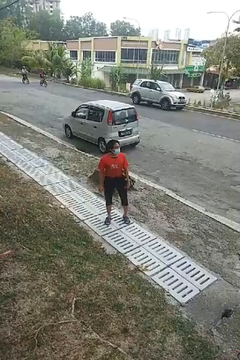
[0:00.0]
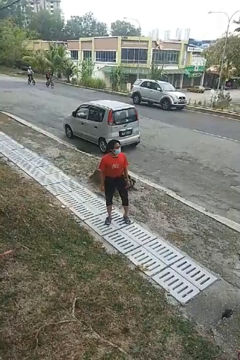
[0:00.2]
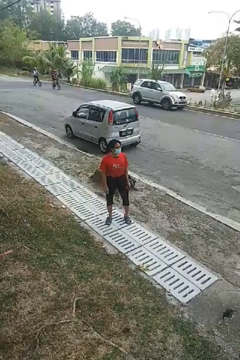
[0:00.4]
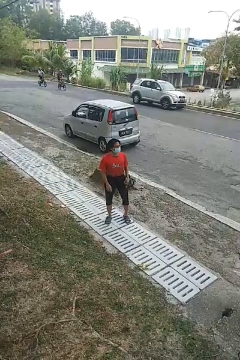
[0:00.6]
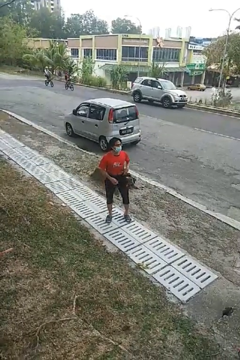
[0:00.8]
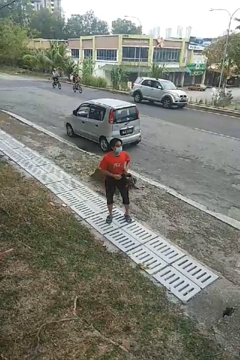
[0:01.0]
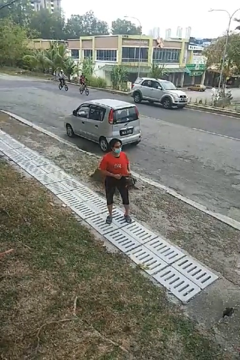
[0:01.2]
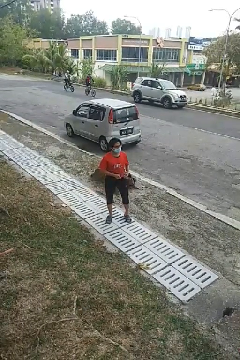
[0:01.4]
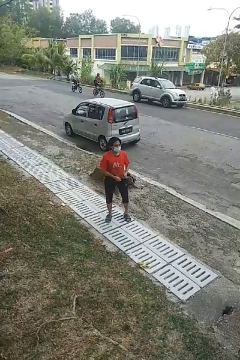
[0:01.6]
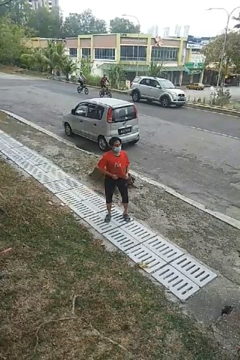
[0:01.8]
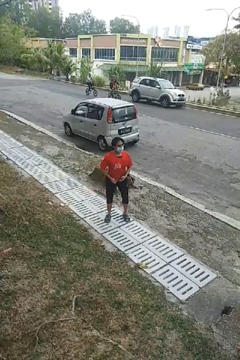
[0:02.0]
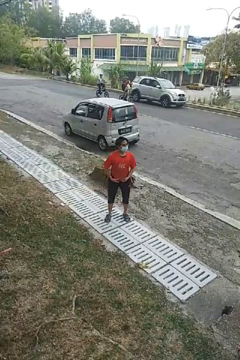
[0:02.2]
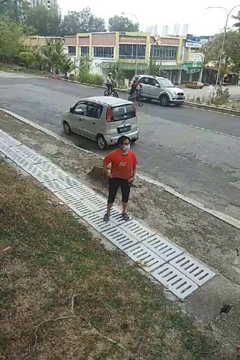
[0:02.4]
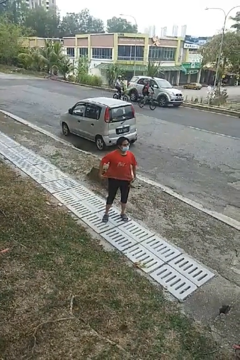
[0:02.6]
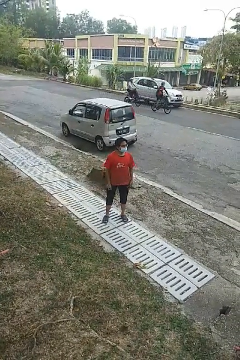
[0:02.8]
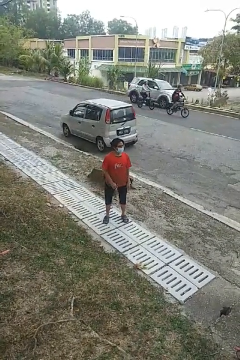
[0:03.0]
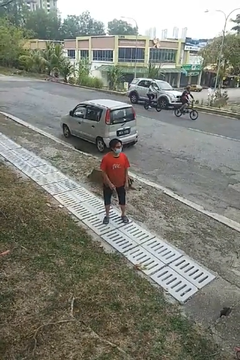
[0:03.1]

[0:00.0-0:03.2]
person untucks shirt

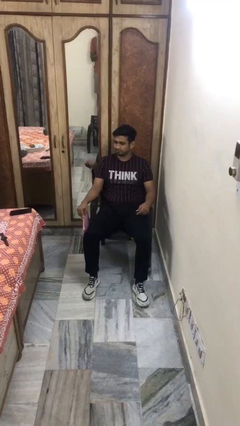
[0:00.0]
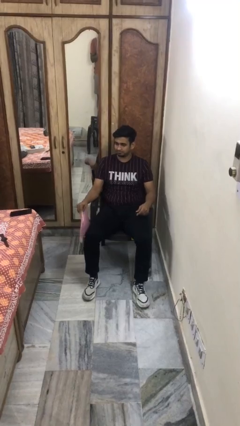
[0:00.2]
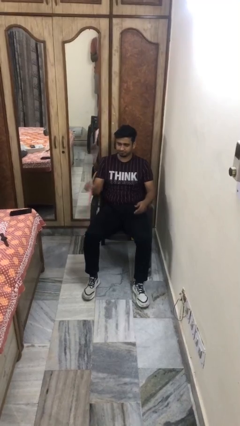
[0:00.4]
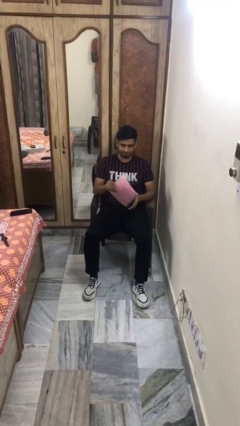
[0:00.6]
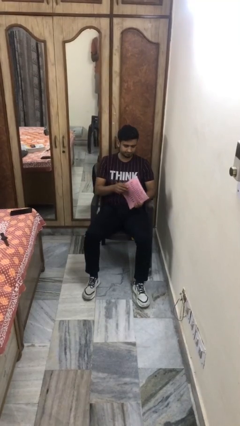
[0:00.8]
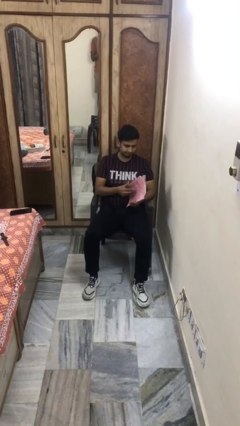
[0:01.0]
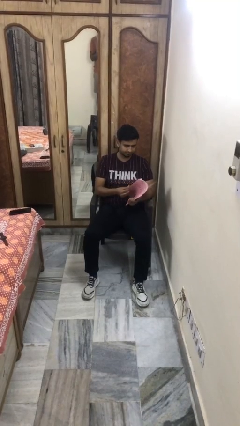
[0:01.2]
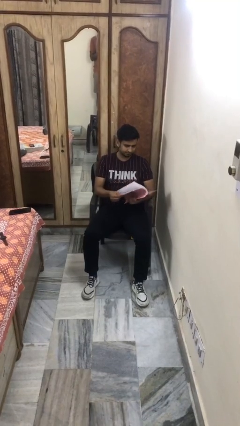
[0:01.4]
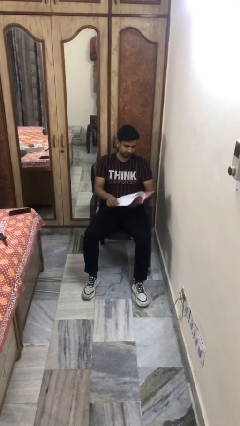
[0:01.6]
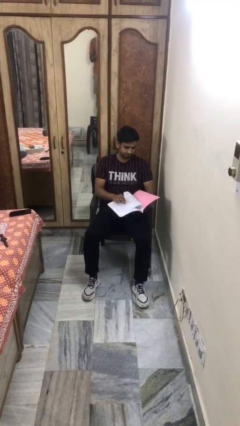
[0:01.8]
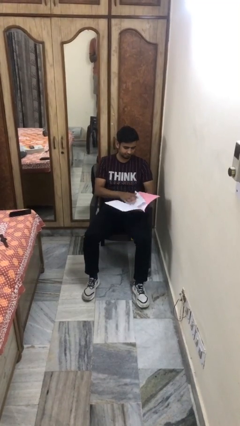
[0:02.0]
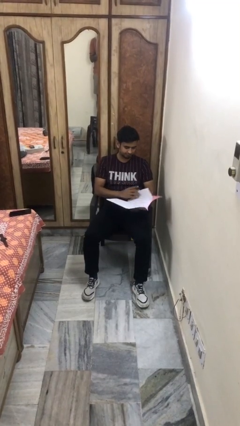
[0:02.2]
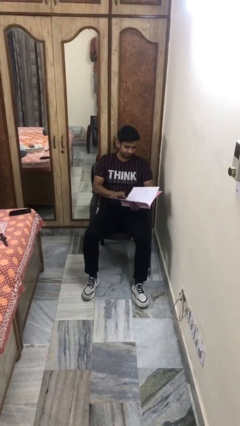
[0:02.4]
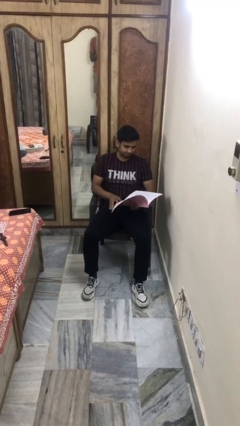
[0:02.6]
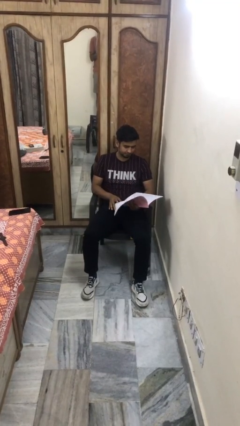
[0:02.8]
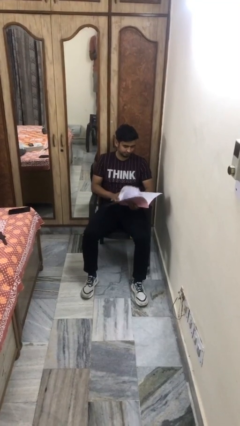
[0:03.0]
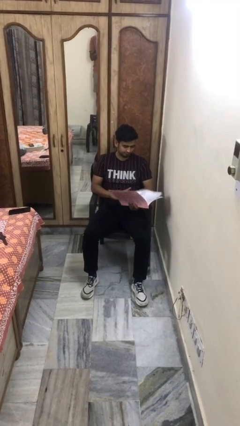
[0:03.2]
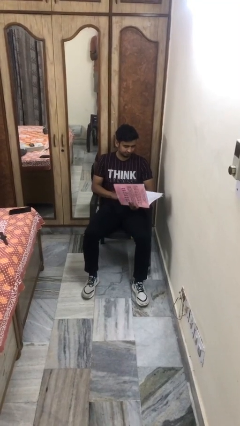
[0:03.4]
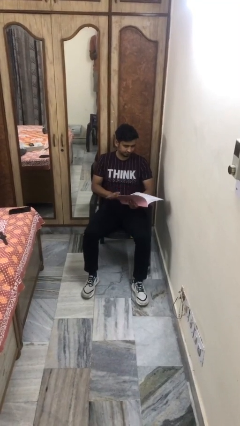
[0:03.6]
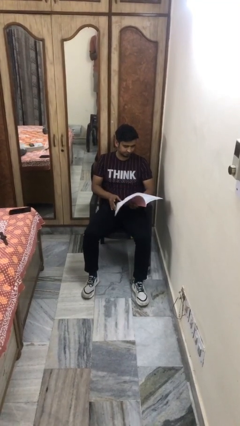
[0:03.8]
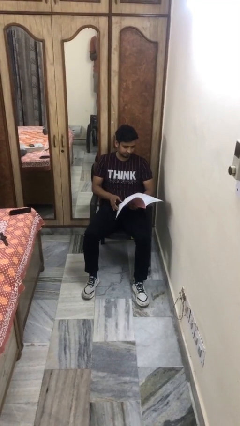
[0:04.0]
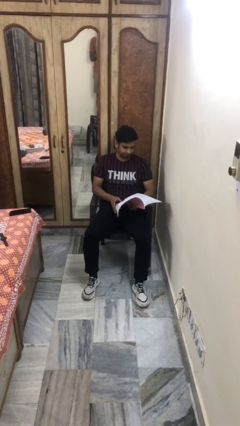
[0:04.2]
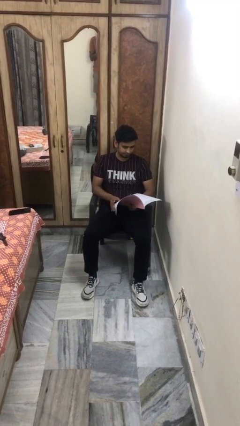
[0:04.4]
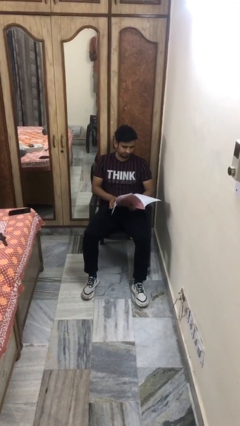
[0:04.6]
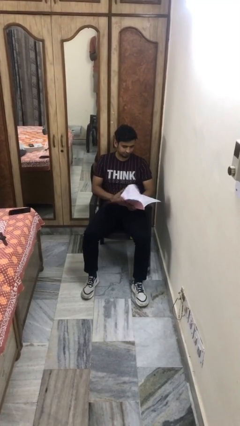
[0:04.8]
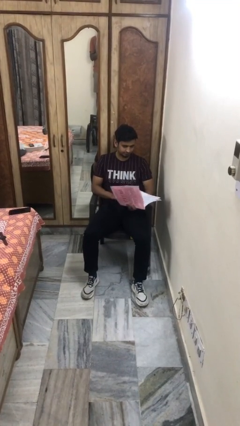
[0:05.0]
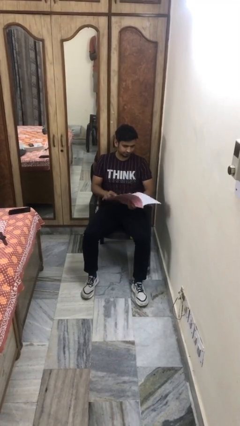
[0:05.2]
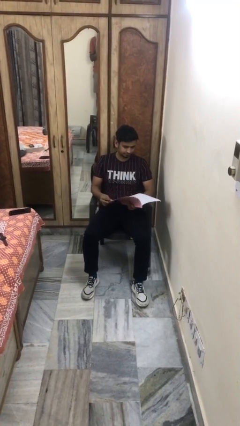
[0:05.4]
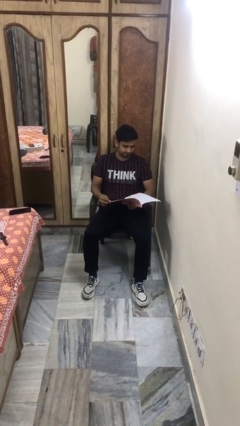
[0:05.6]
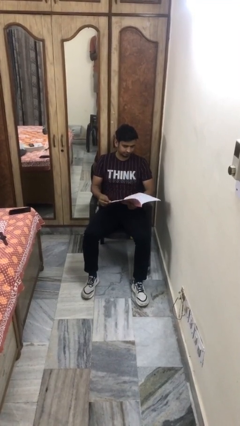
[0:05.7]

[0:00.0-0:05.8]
person reads magazine

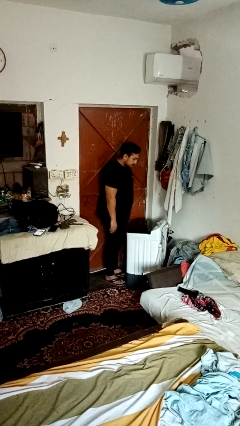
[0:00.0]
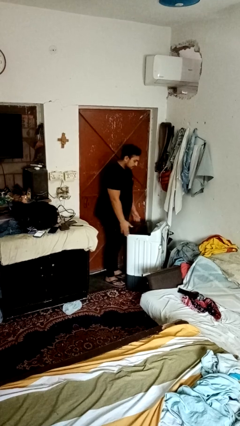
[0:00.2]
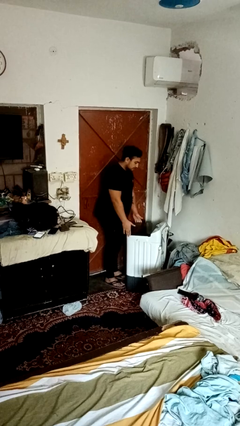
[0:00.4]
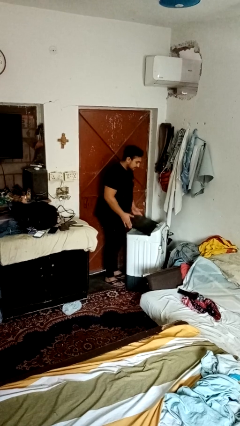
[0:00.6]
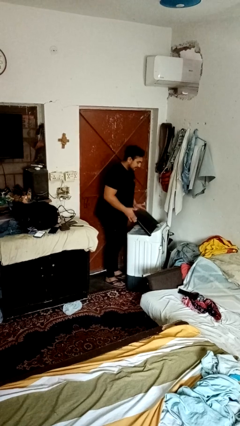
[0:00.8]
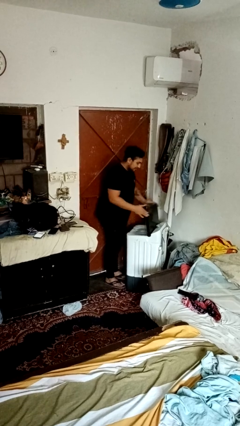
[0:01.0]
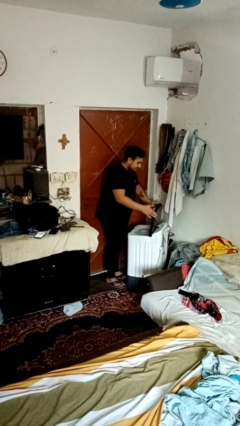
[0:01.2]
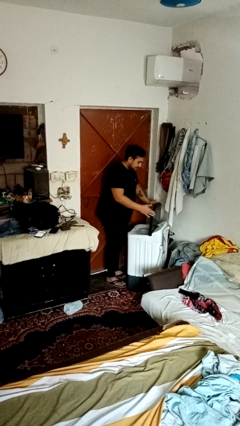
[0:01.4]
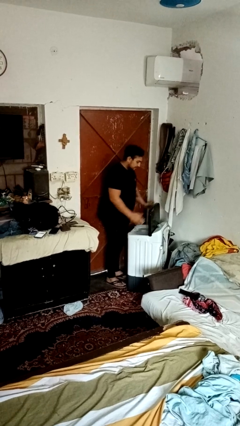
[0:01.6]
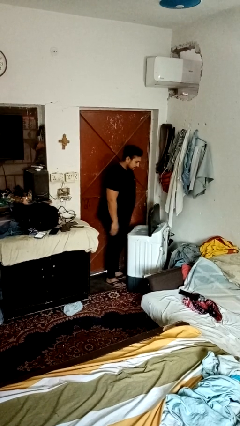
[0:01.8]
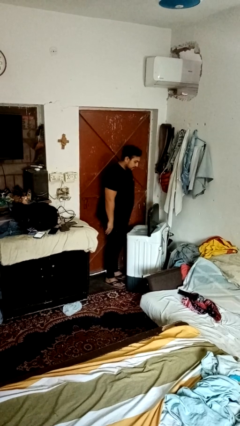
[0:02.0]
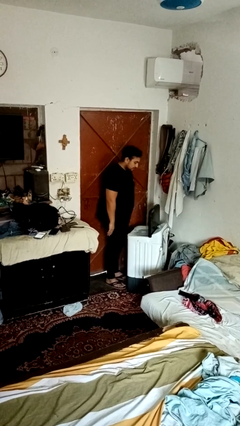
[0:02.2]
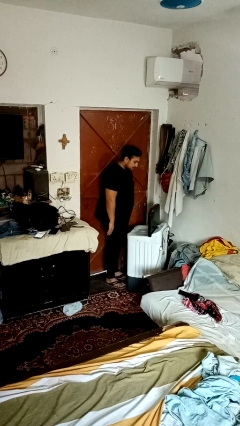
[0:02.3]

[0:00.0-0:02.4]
person opens clothes washer

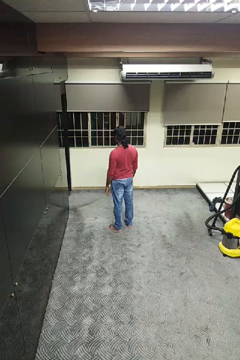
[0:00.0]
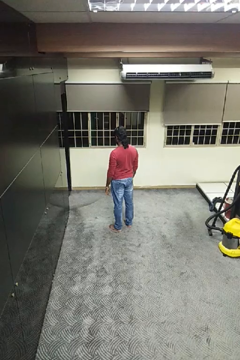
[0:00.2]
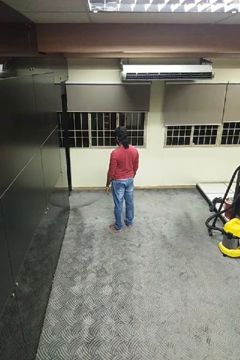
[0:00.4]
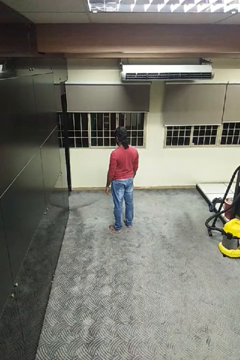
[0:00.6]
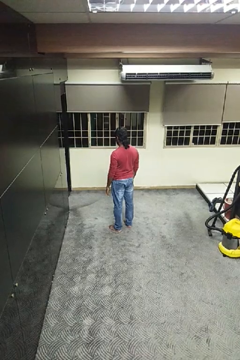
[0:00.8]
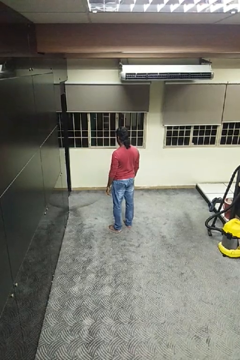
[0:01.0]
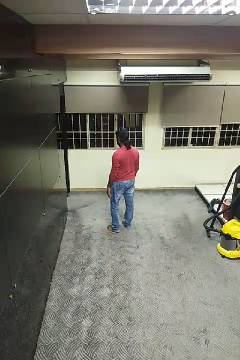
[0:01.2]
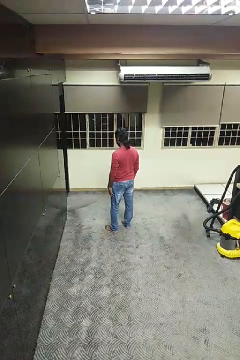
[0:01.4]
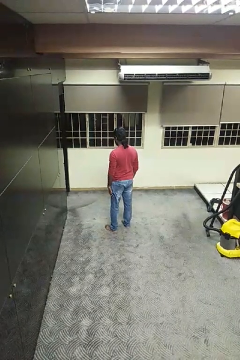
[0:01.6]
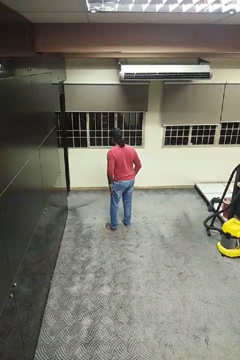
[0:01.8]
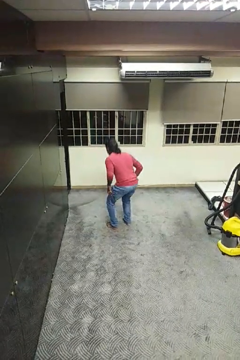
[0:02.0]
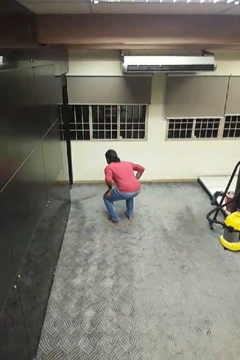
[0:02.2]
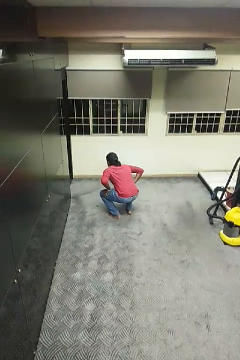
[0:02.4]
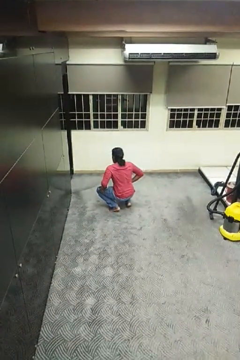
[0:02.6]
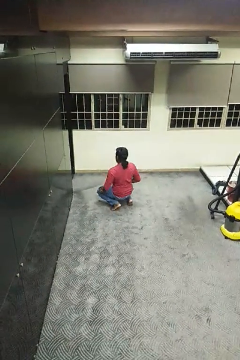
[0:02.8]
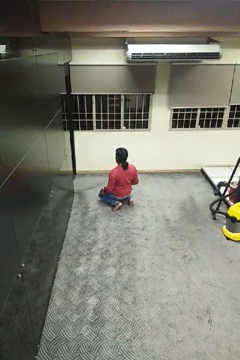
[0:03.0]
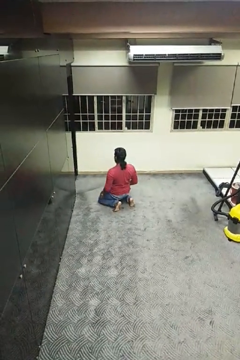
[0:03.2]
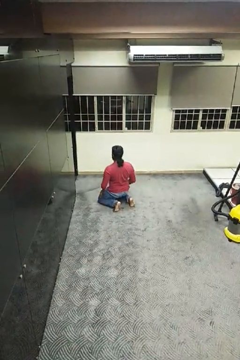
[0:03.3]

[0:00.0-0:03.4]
person kneels

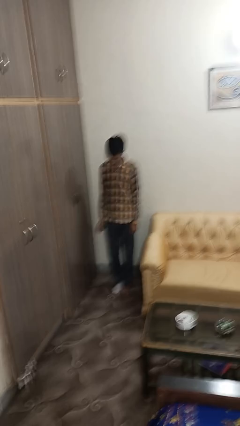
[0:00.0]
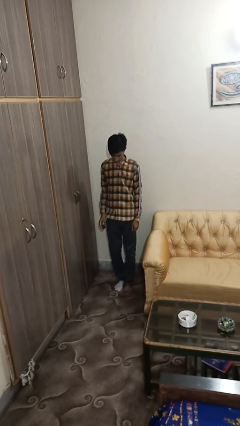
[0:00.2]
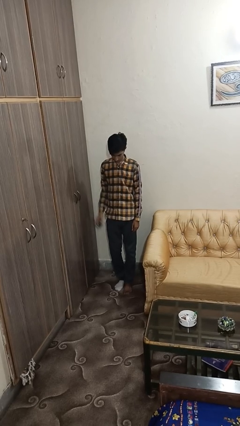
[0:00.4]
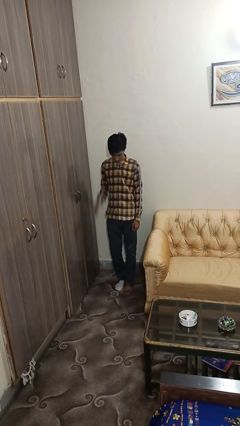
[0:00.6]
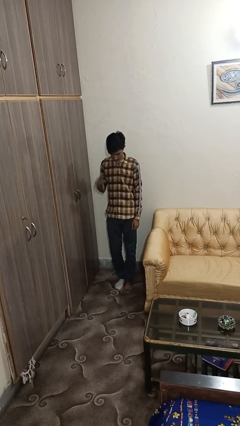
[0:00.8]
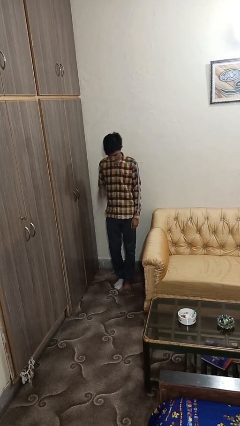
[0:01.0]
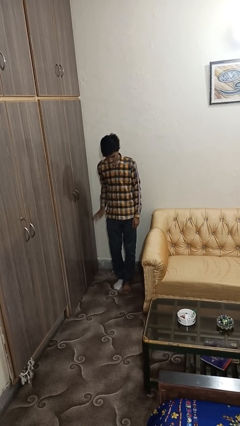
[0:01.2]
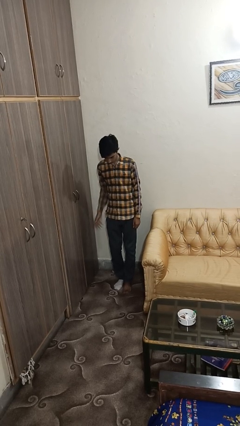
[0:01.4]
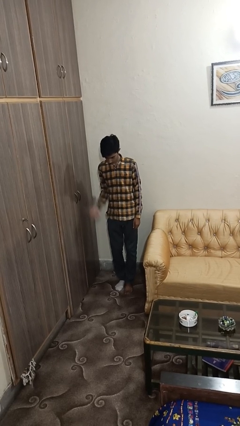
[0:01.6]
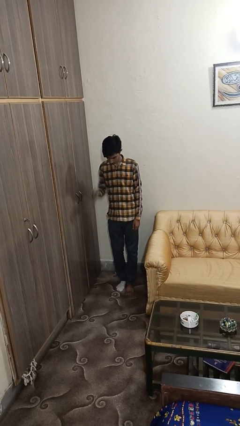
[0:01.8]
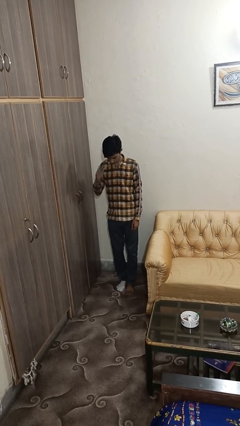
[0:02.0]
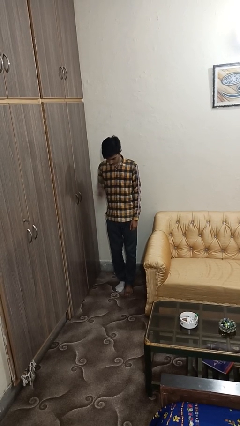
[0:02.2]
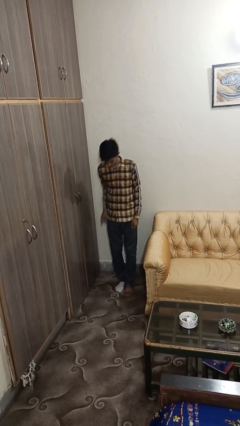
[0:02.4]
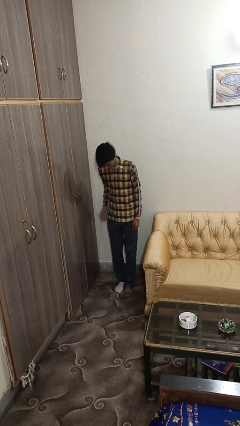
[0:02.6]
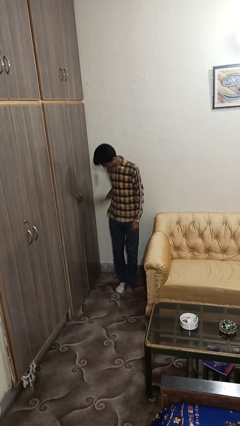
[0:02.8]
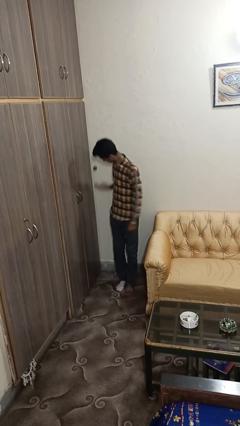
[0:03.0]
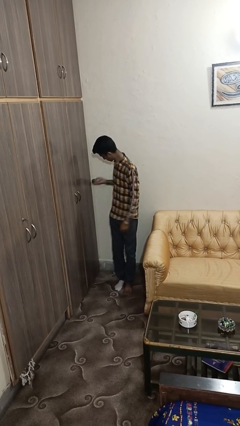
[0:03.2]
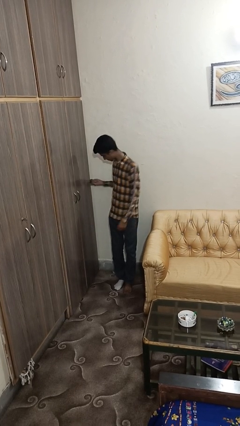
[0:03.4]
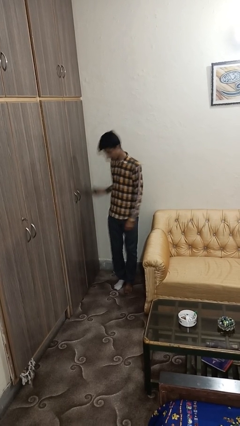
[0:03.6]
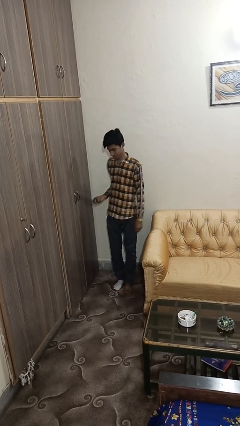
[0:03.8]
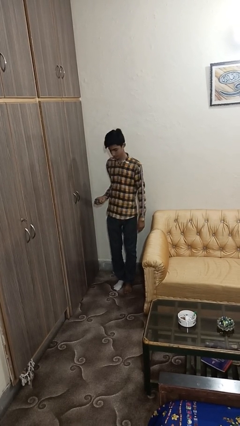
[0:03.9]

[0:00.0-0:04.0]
person bounces ball on floor

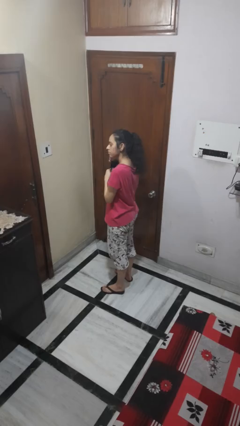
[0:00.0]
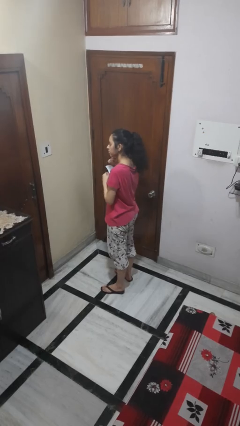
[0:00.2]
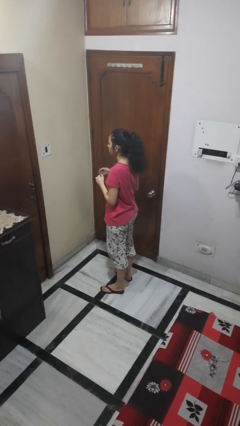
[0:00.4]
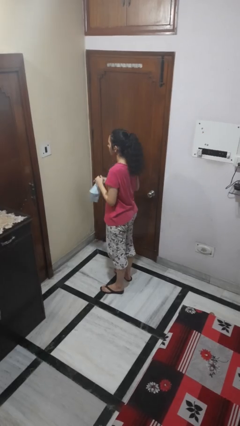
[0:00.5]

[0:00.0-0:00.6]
person takes off facemask
